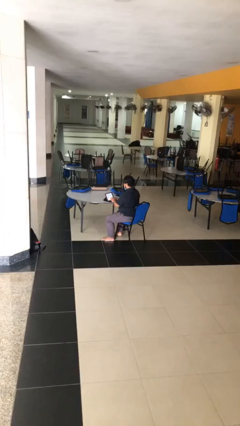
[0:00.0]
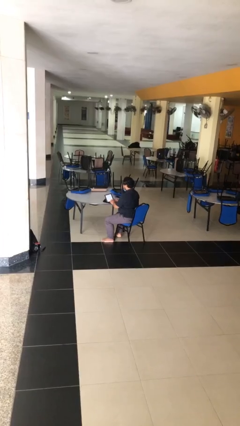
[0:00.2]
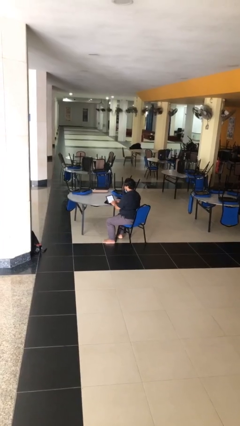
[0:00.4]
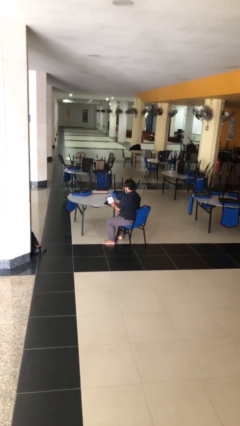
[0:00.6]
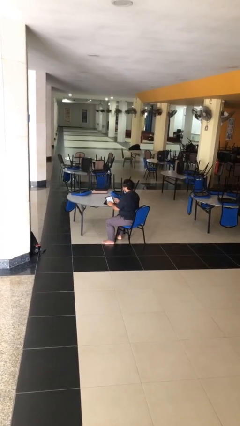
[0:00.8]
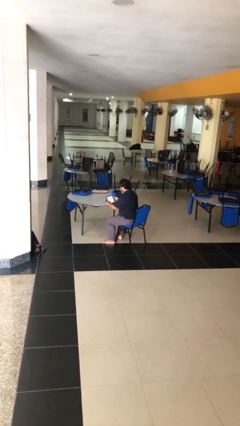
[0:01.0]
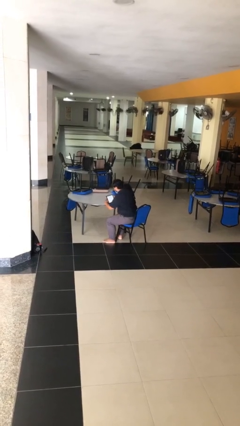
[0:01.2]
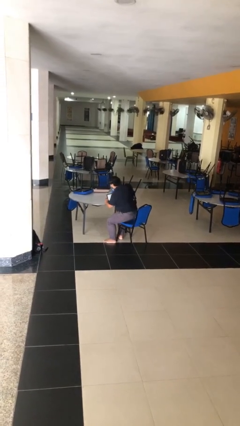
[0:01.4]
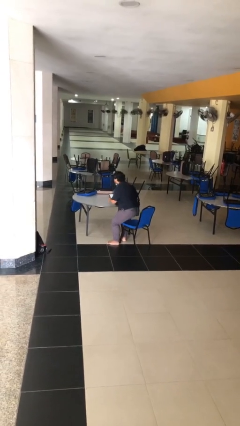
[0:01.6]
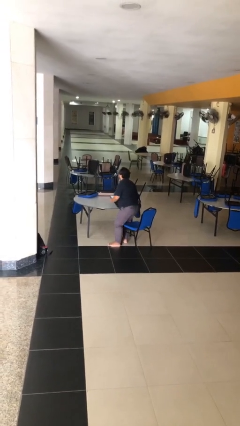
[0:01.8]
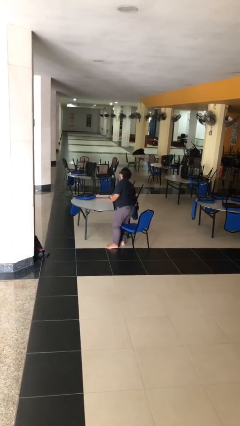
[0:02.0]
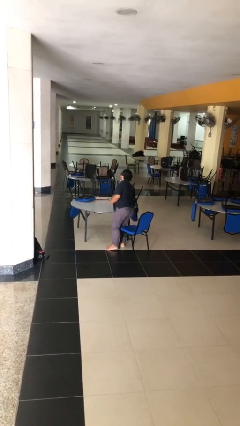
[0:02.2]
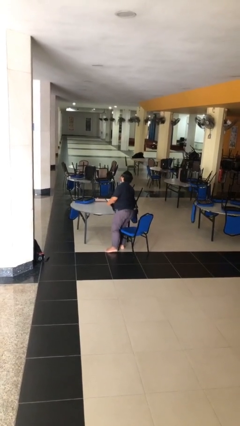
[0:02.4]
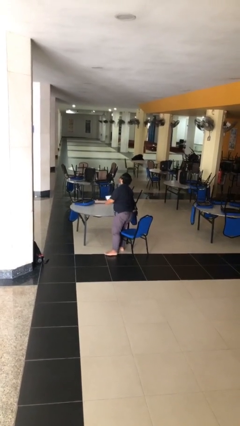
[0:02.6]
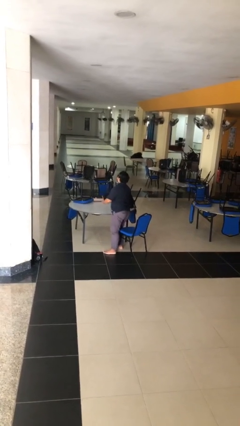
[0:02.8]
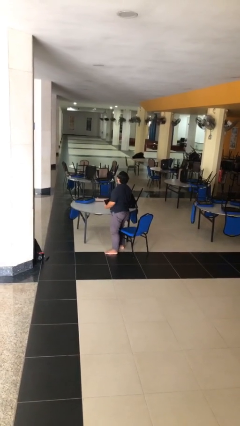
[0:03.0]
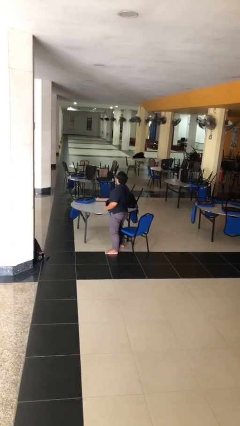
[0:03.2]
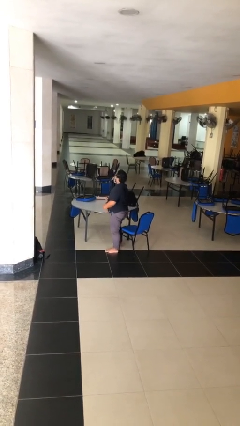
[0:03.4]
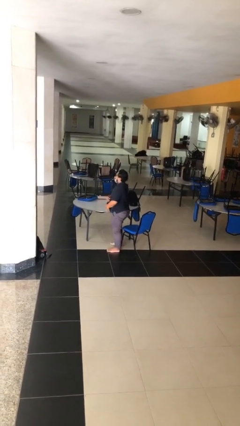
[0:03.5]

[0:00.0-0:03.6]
person stands up

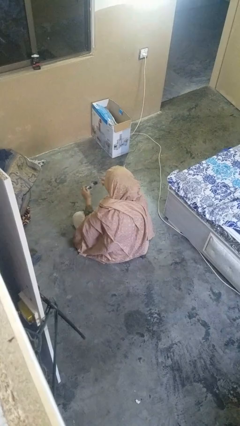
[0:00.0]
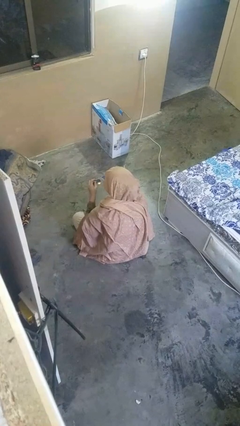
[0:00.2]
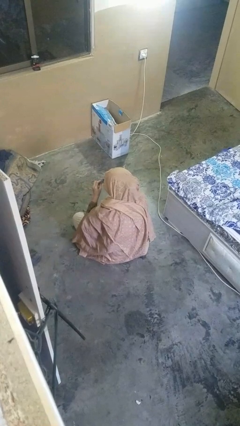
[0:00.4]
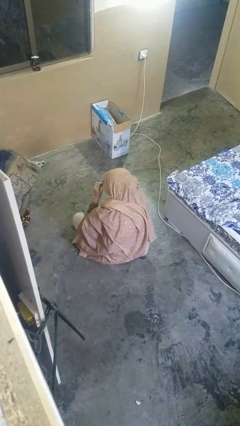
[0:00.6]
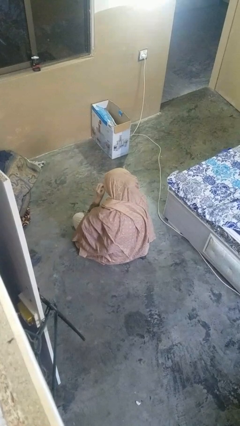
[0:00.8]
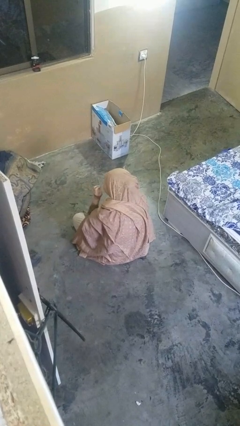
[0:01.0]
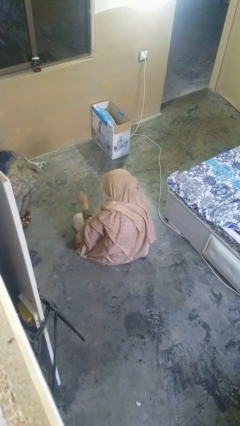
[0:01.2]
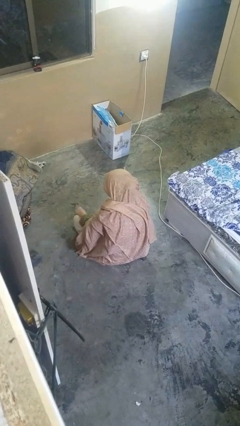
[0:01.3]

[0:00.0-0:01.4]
person puts on glasses

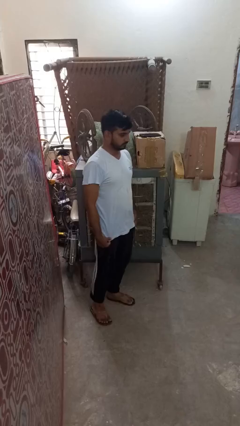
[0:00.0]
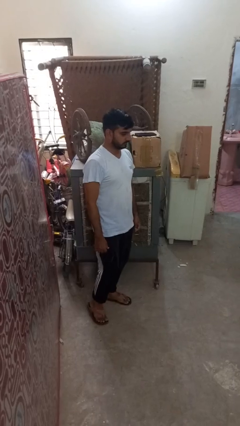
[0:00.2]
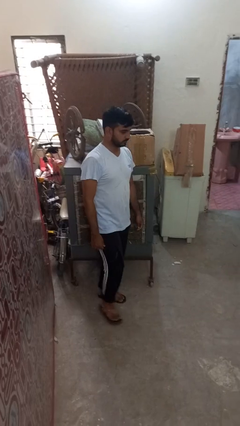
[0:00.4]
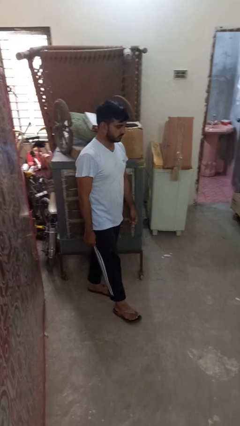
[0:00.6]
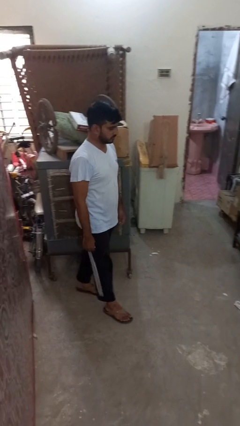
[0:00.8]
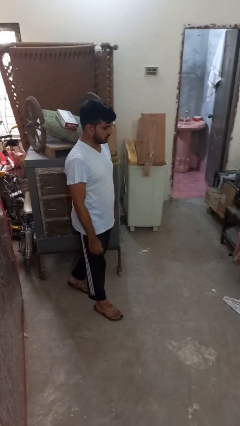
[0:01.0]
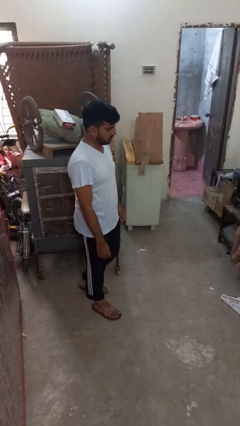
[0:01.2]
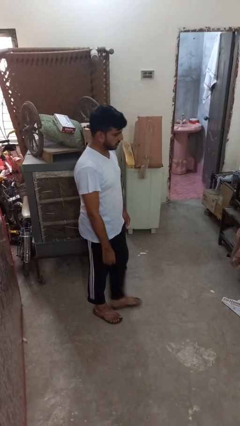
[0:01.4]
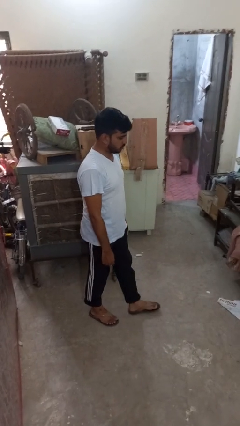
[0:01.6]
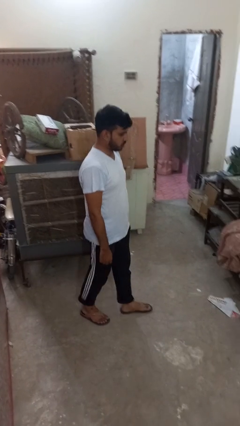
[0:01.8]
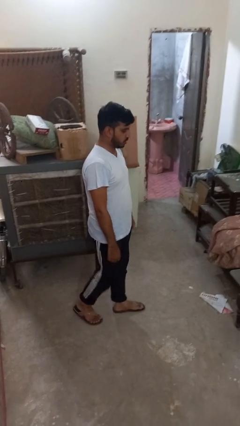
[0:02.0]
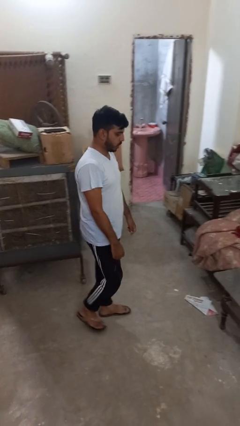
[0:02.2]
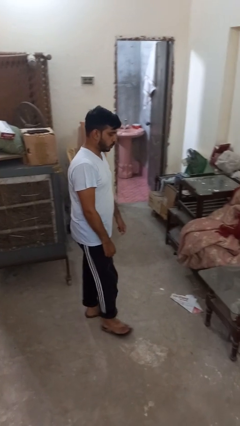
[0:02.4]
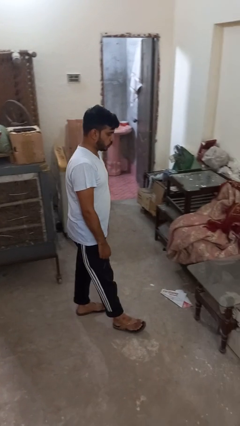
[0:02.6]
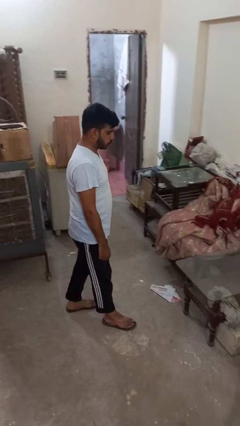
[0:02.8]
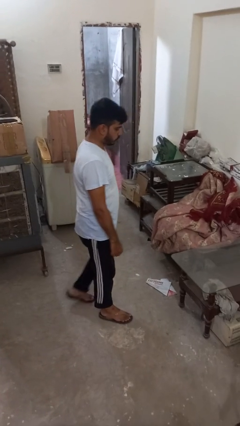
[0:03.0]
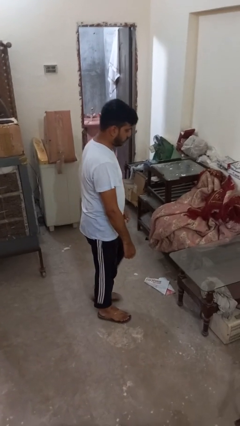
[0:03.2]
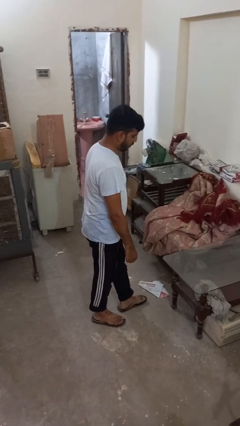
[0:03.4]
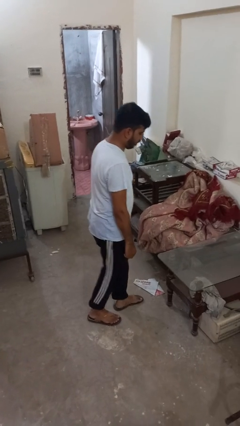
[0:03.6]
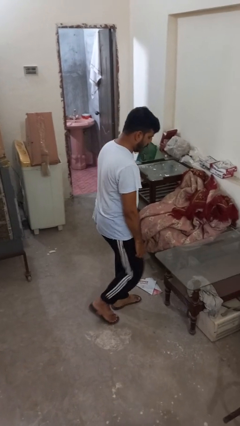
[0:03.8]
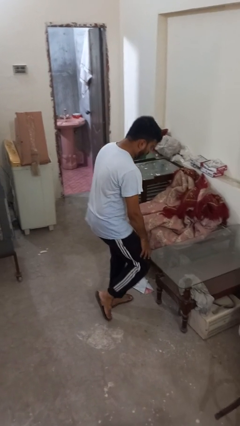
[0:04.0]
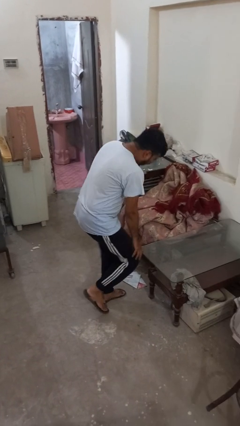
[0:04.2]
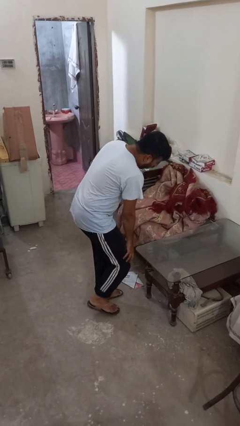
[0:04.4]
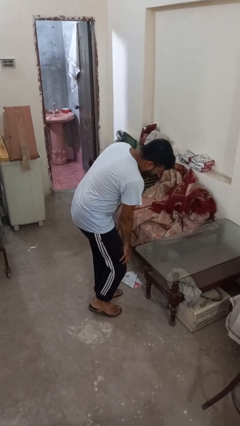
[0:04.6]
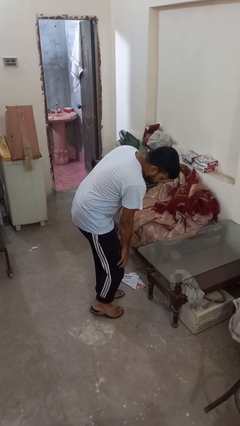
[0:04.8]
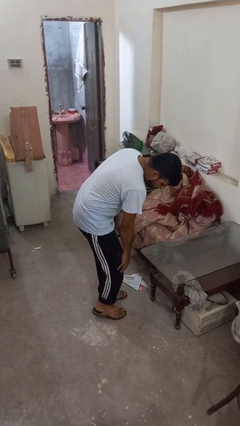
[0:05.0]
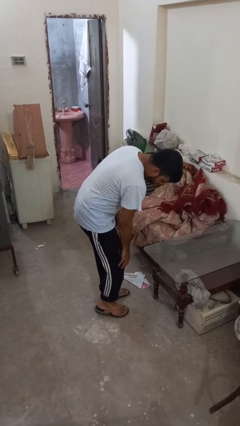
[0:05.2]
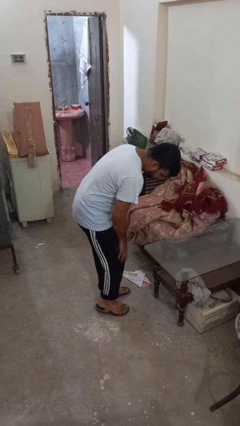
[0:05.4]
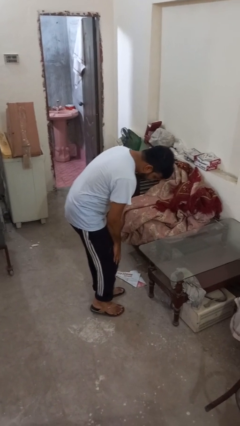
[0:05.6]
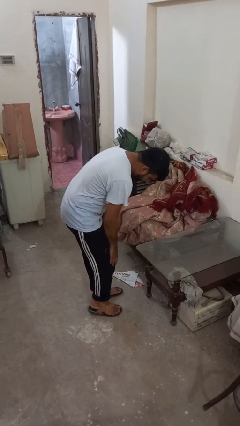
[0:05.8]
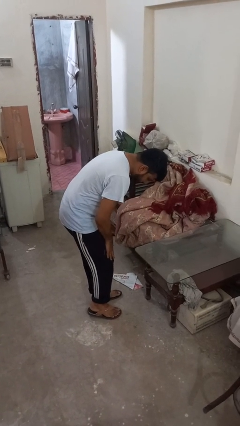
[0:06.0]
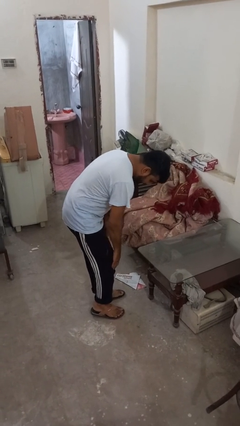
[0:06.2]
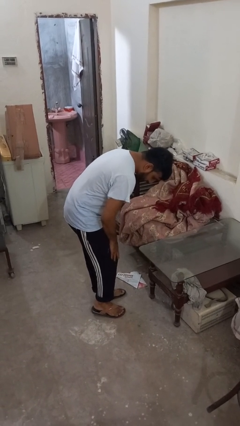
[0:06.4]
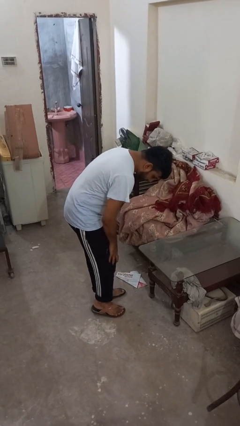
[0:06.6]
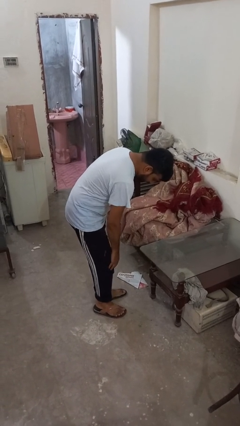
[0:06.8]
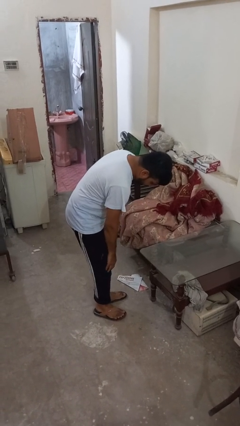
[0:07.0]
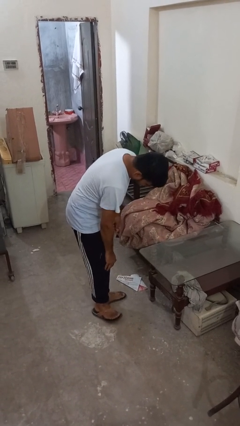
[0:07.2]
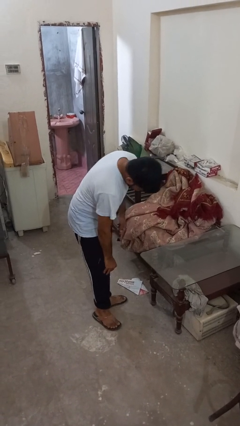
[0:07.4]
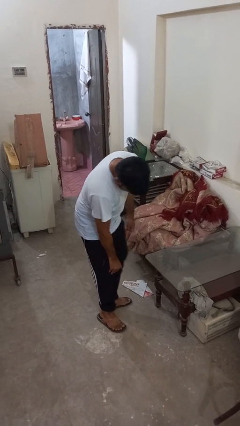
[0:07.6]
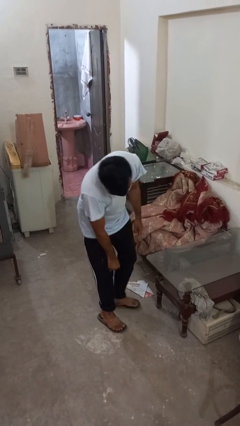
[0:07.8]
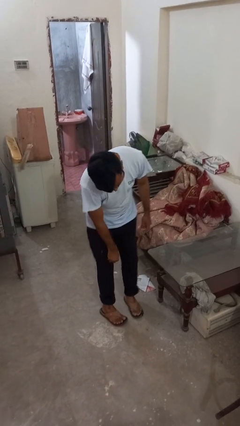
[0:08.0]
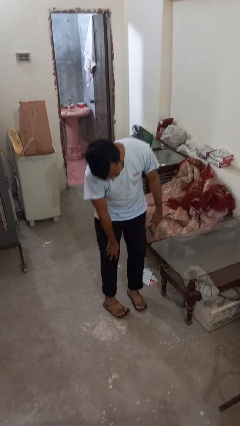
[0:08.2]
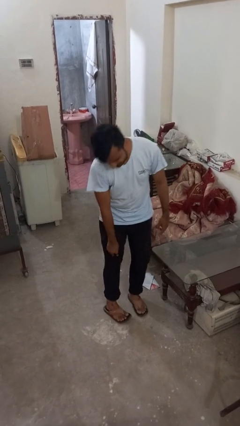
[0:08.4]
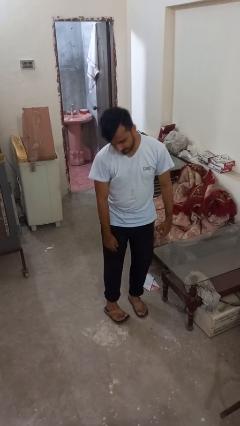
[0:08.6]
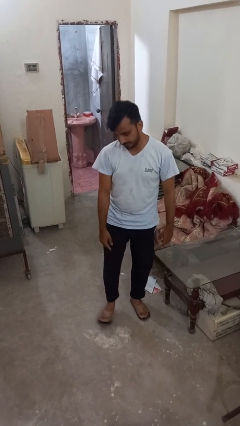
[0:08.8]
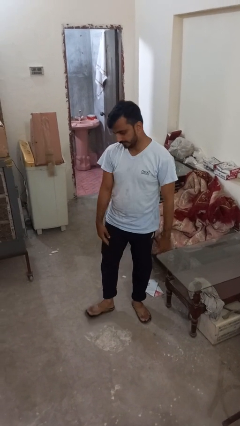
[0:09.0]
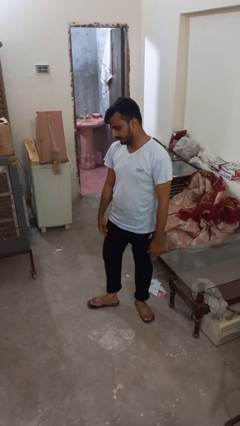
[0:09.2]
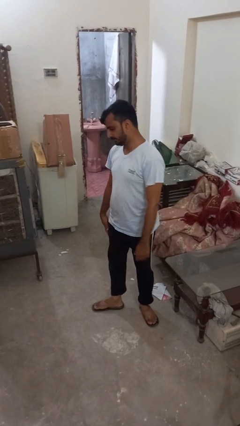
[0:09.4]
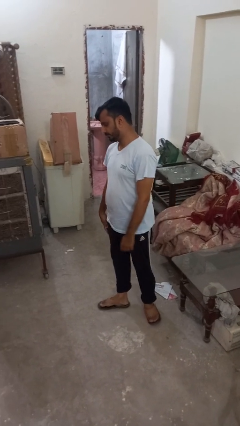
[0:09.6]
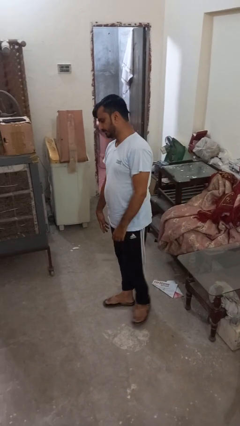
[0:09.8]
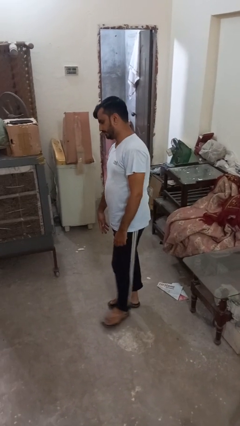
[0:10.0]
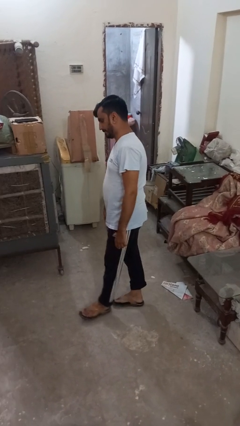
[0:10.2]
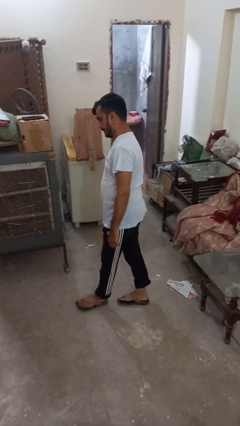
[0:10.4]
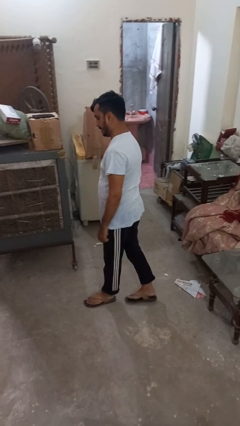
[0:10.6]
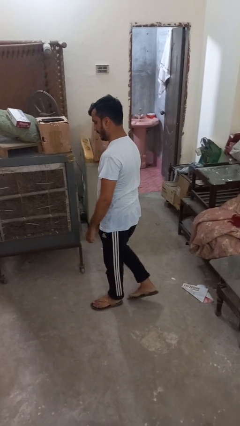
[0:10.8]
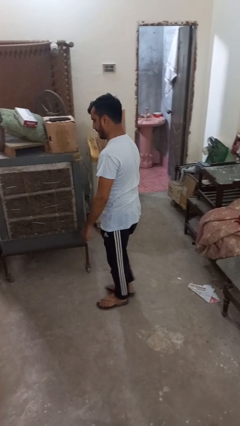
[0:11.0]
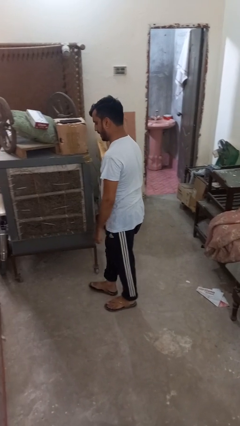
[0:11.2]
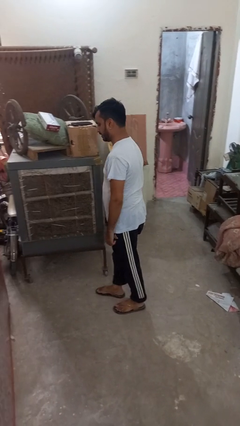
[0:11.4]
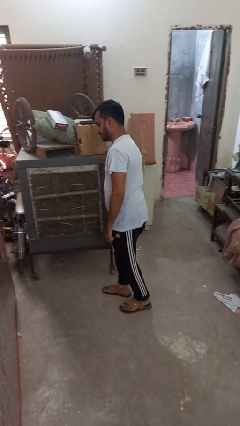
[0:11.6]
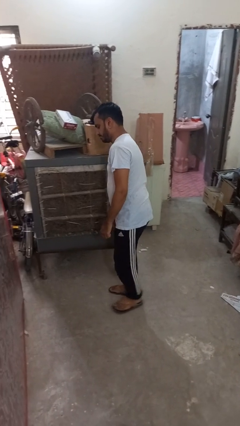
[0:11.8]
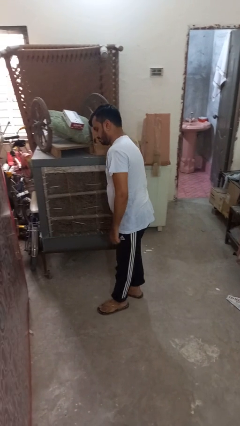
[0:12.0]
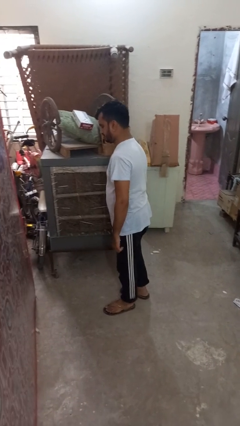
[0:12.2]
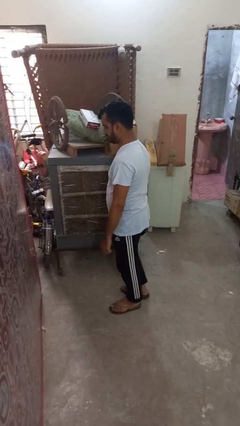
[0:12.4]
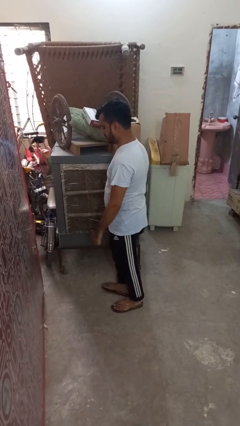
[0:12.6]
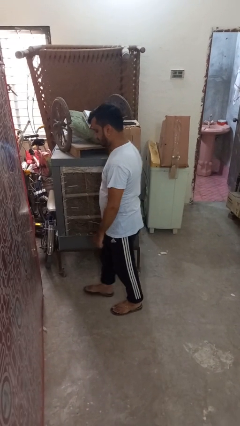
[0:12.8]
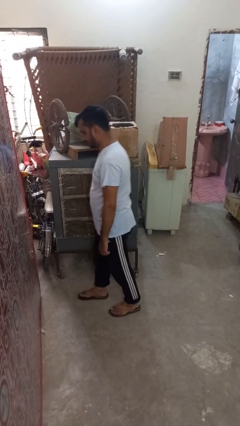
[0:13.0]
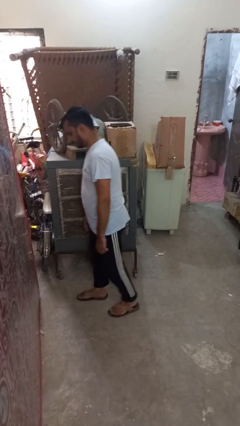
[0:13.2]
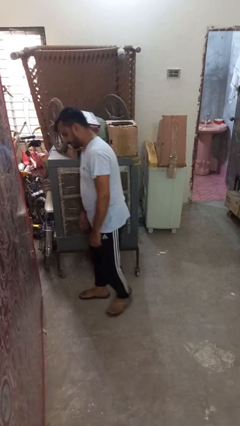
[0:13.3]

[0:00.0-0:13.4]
person stubs toe
